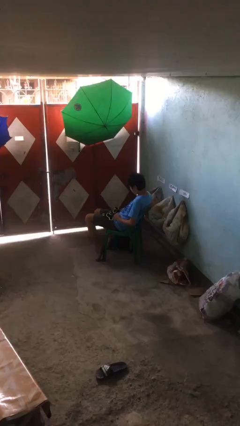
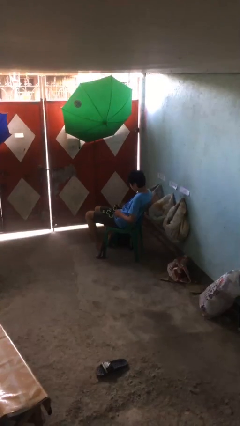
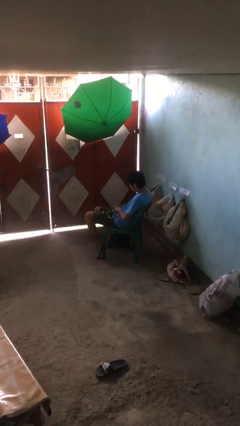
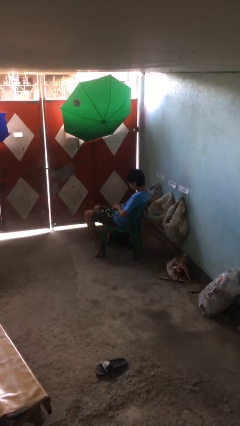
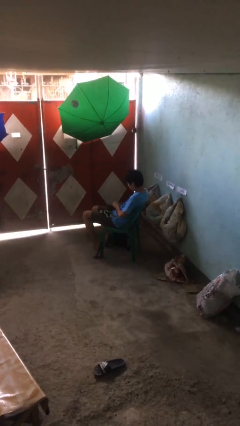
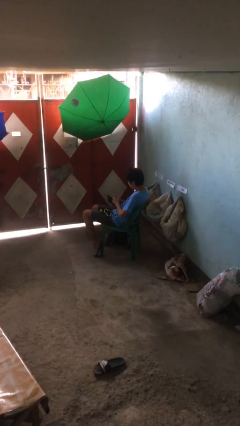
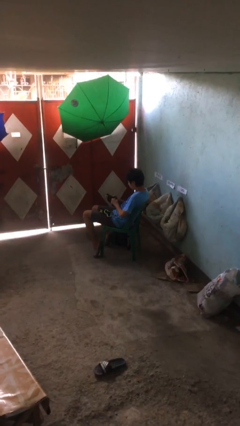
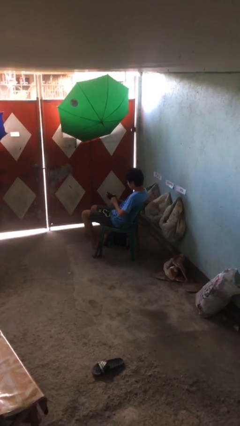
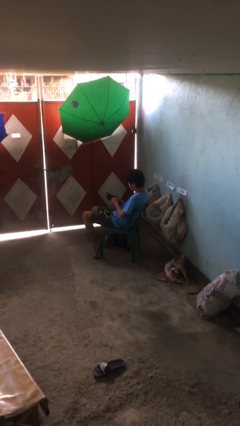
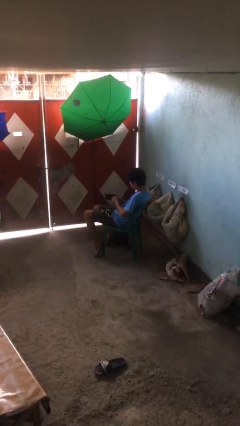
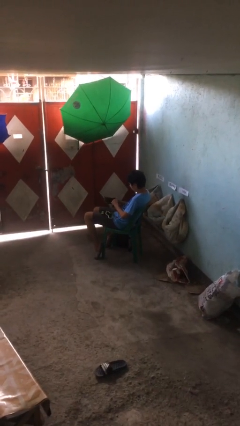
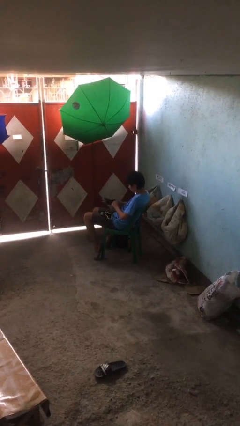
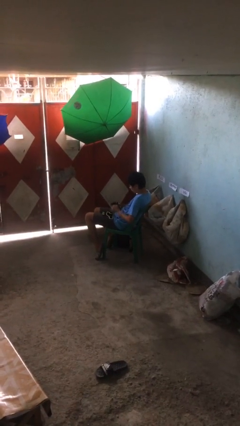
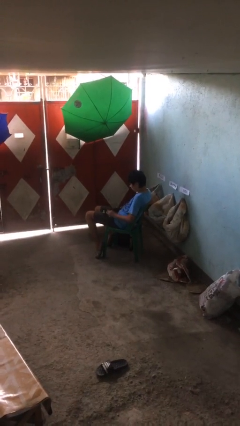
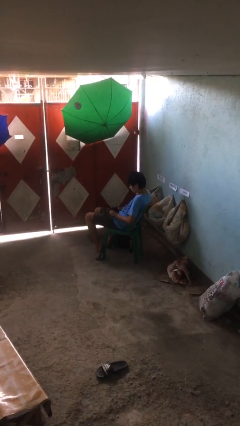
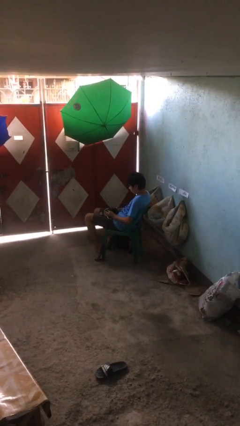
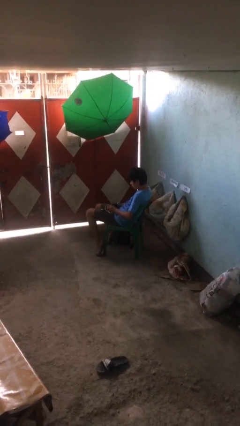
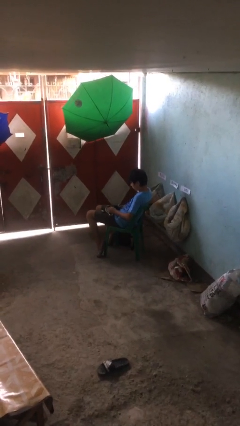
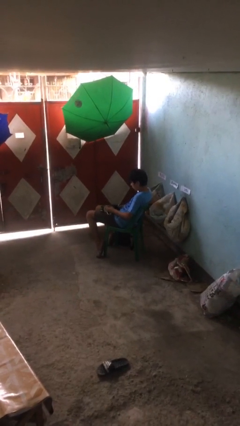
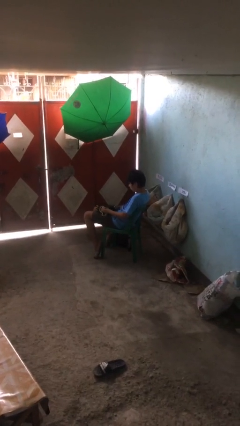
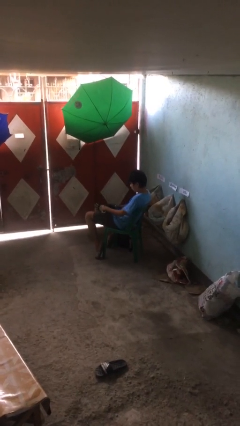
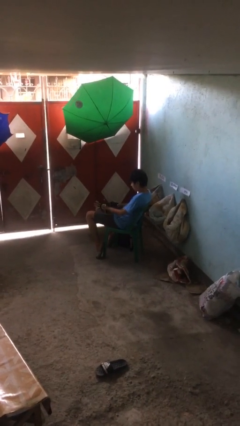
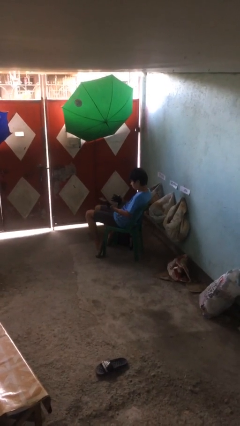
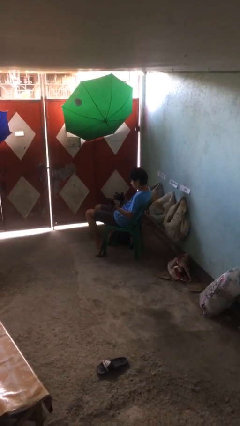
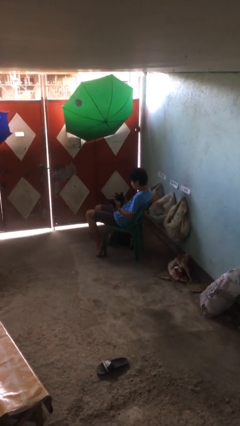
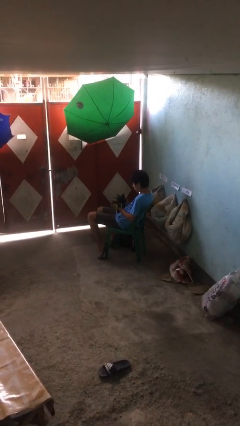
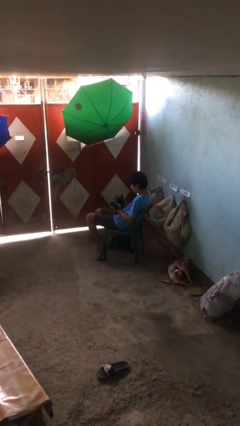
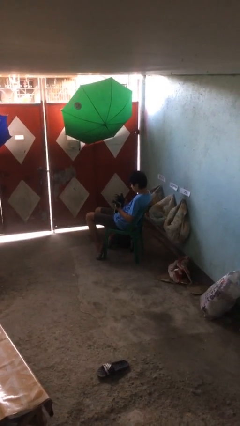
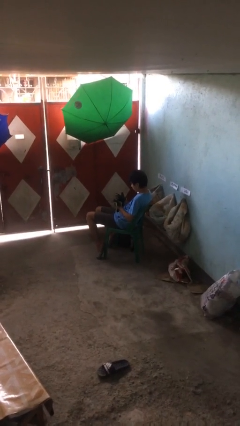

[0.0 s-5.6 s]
person puts on gloves

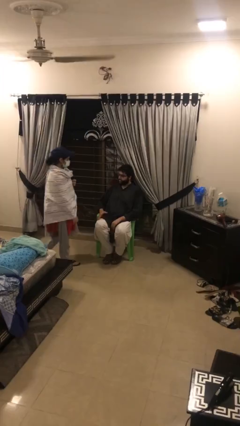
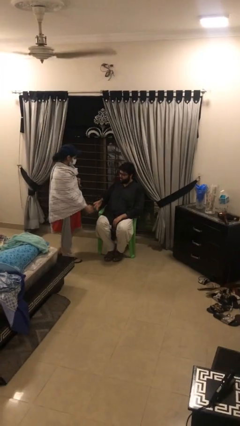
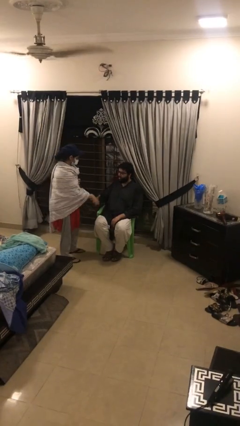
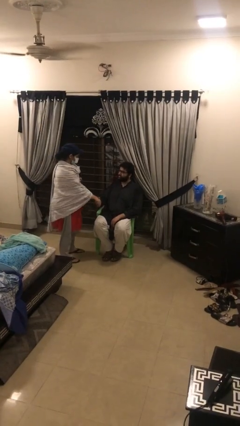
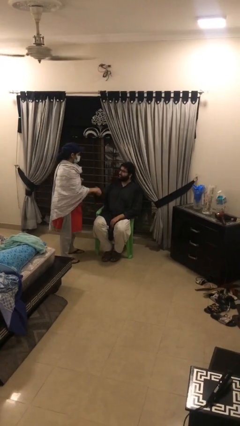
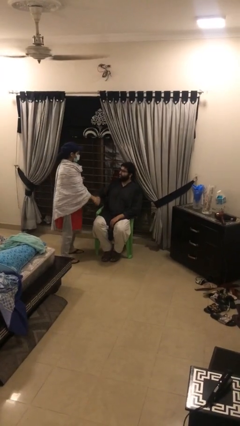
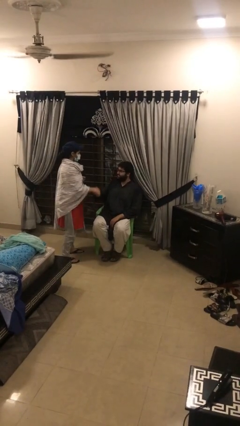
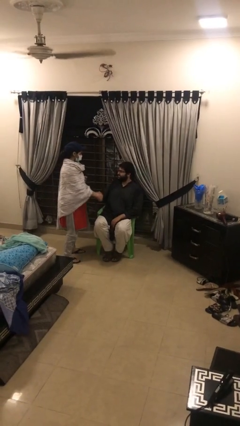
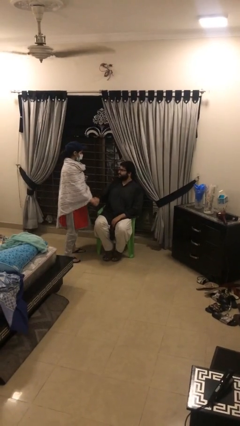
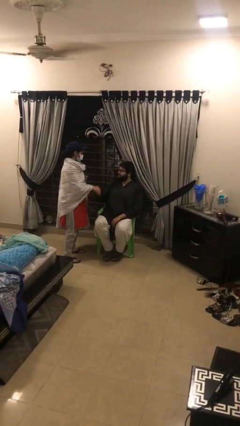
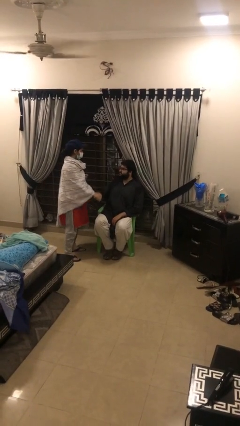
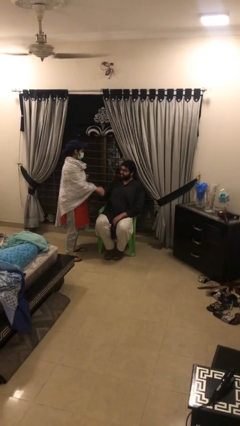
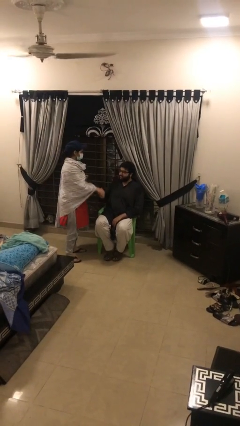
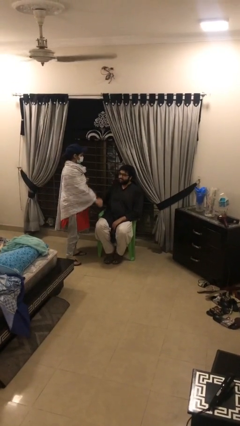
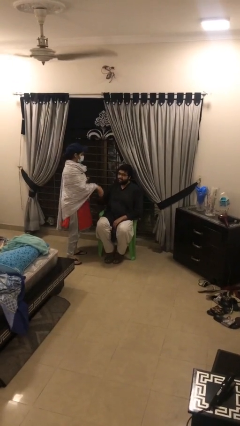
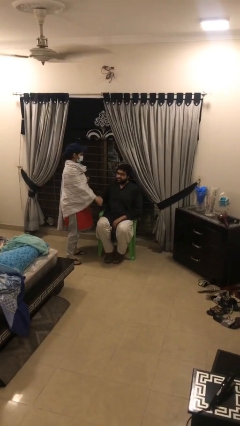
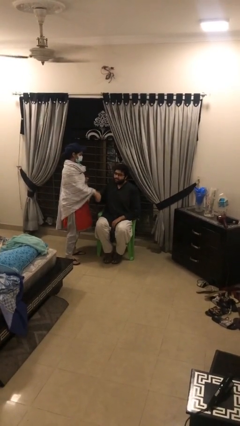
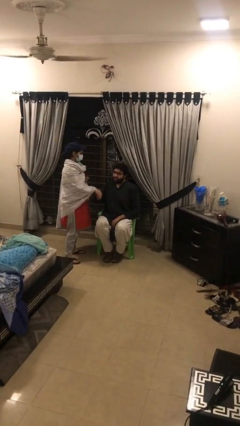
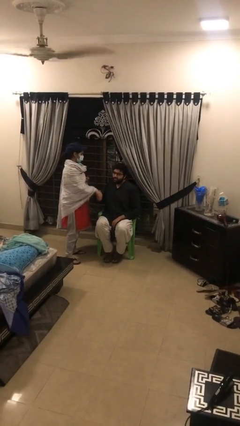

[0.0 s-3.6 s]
person shakes hand

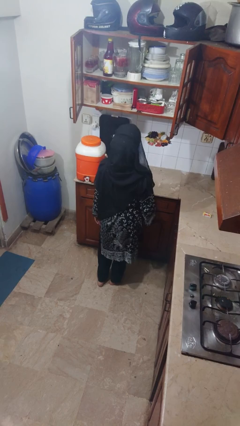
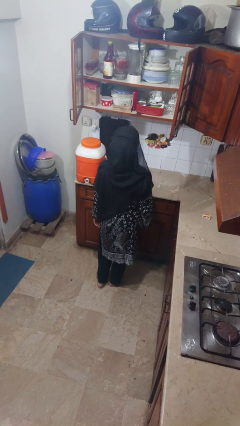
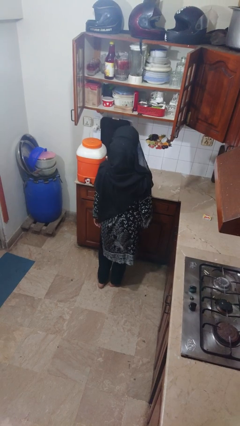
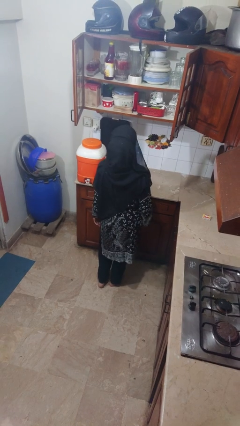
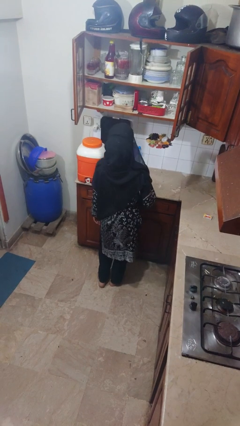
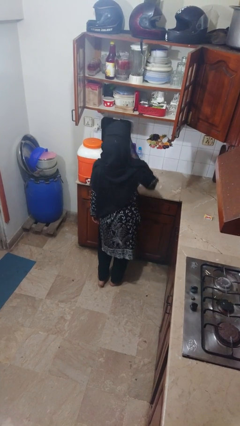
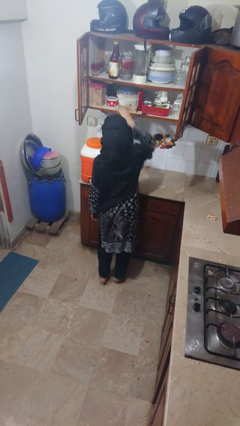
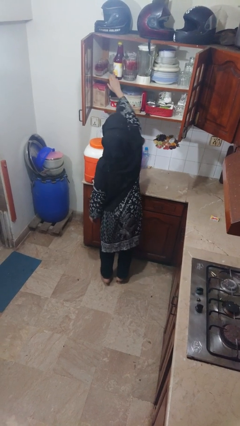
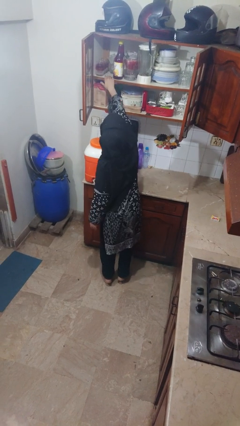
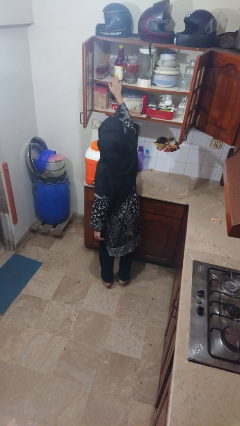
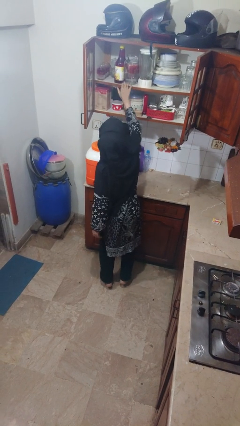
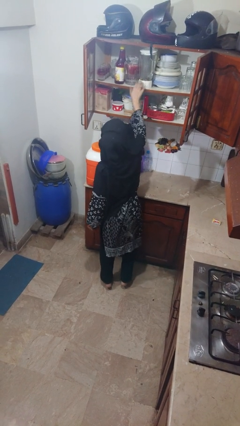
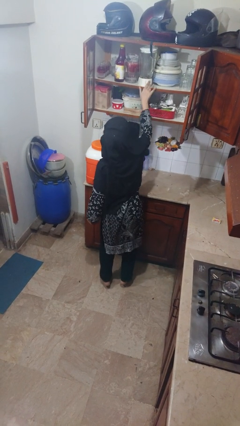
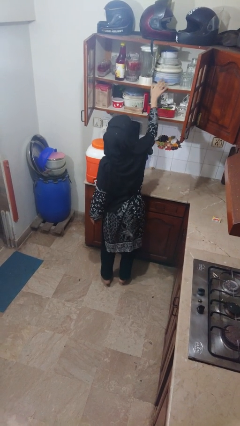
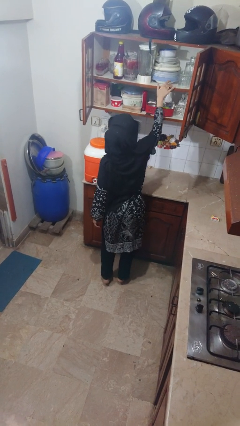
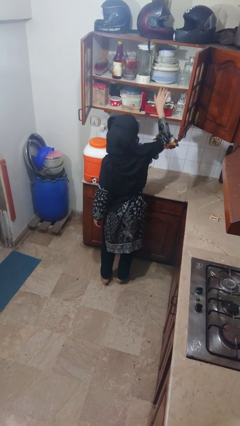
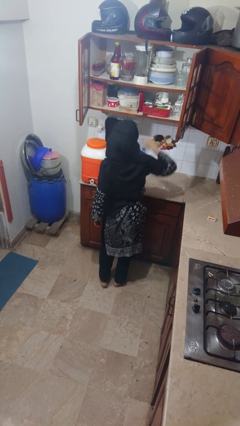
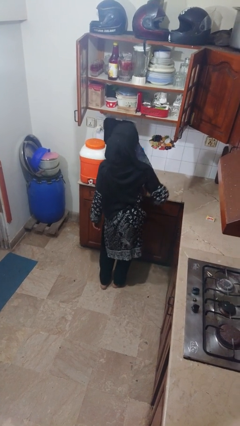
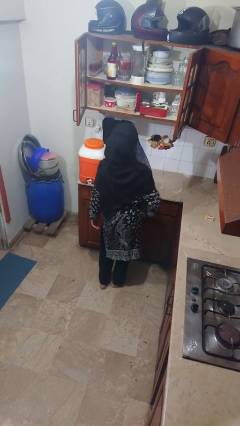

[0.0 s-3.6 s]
person searches in cabinet

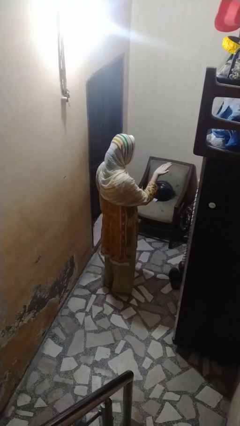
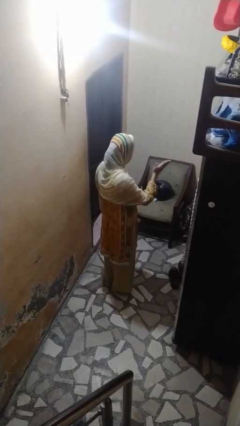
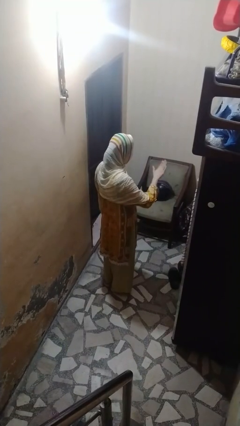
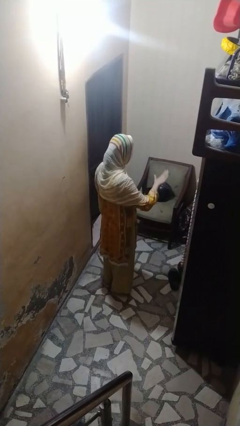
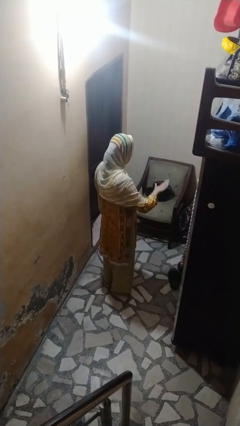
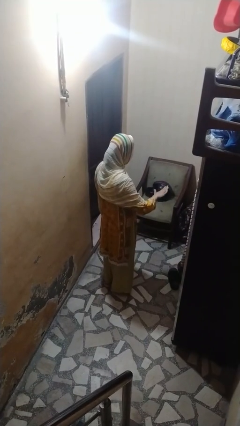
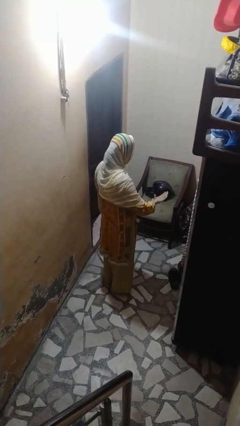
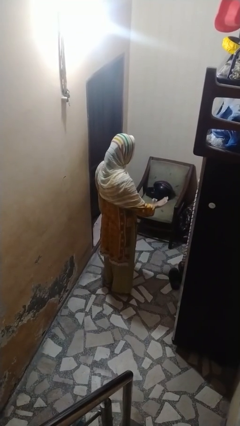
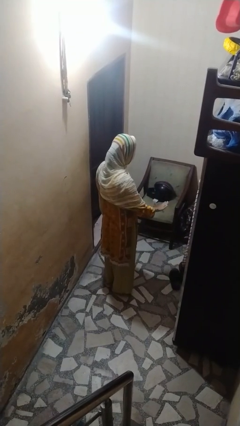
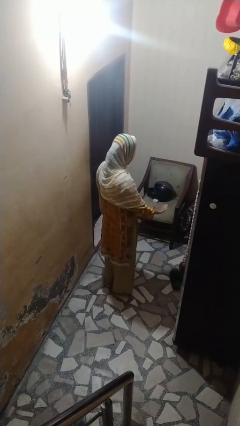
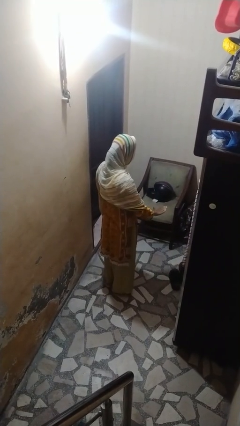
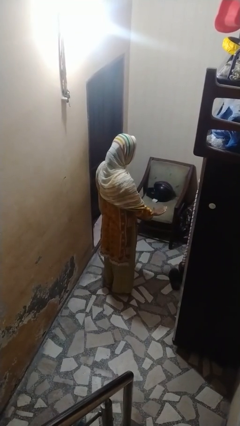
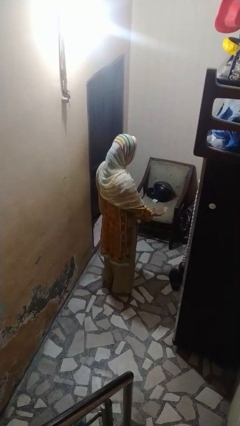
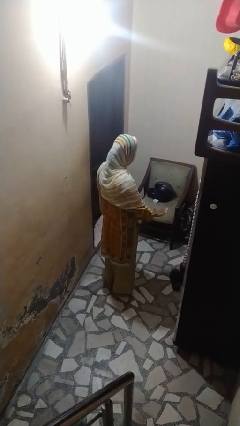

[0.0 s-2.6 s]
person gestures swipe down

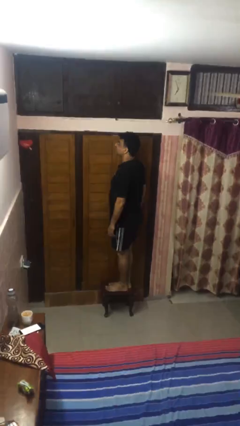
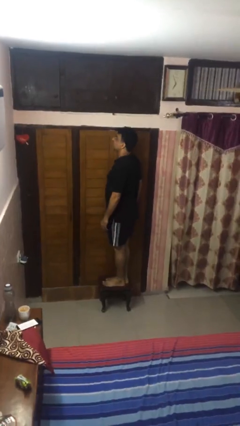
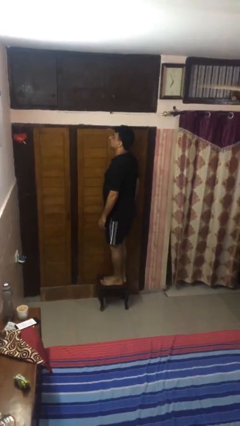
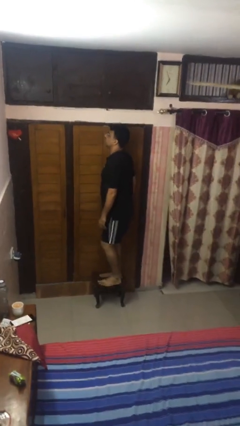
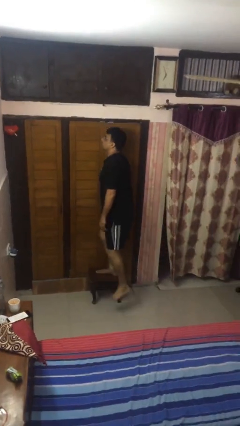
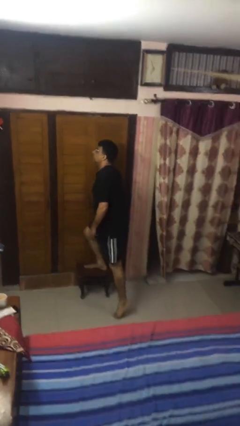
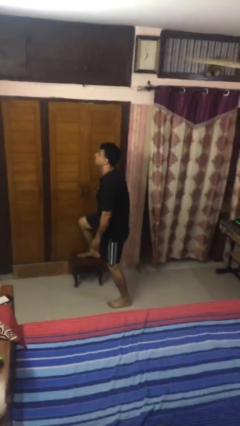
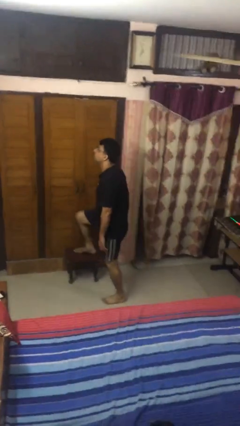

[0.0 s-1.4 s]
person climbs off table

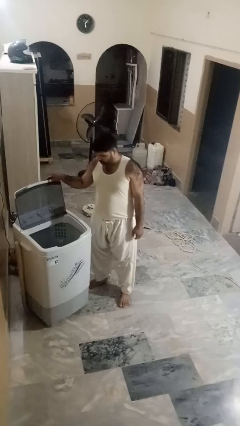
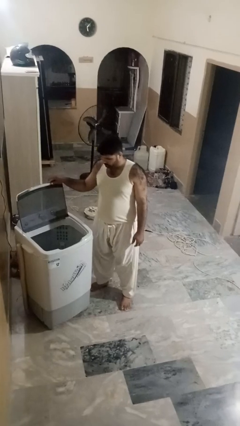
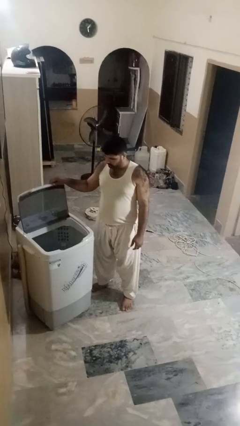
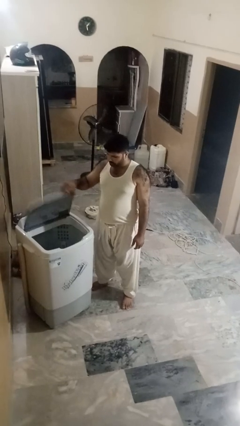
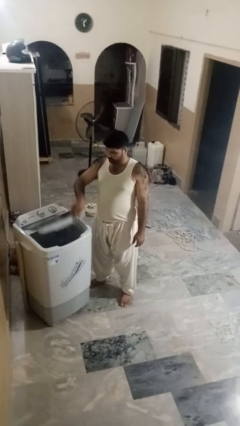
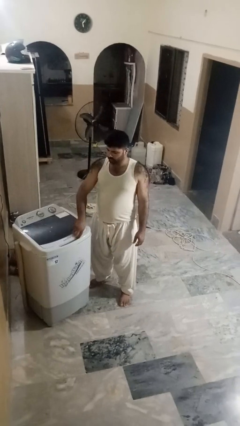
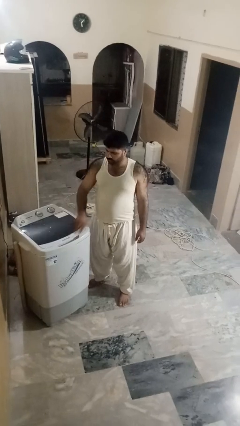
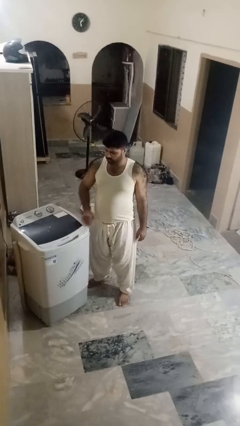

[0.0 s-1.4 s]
person closes clothes washer
